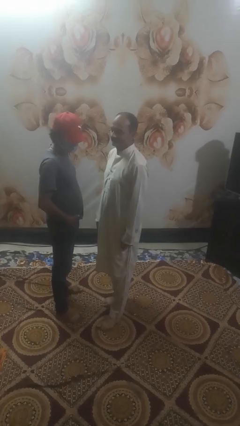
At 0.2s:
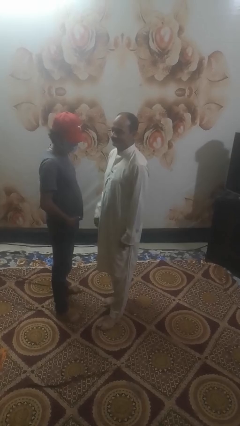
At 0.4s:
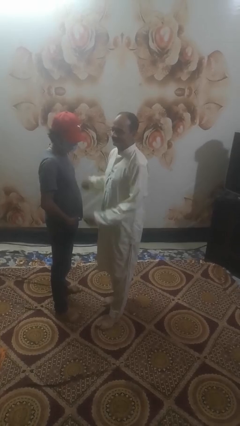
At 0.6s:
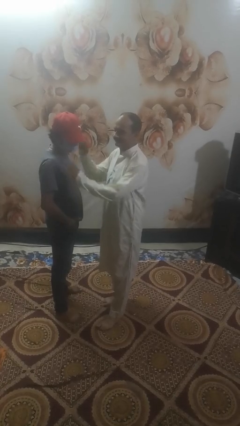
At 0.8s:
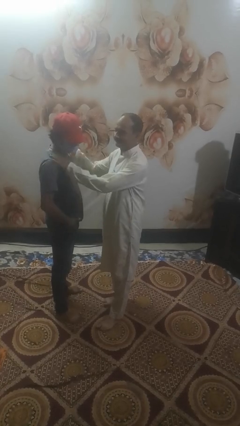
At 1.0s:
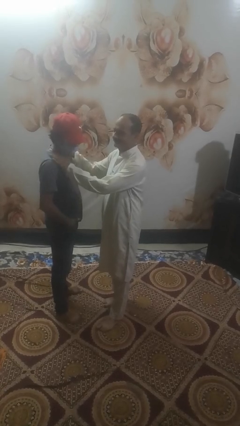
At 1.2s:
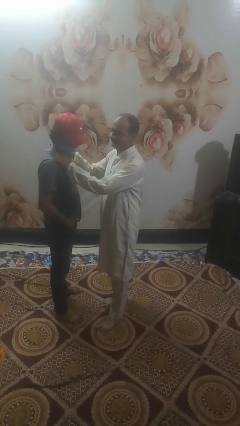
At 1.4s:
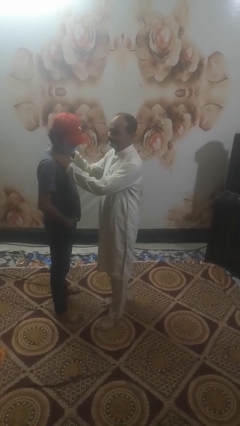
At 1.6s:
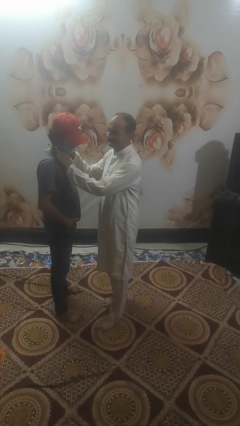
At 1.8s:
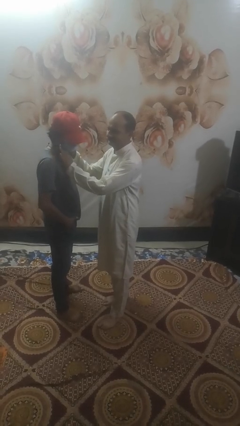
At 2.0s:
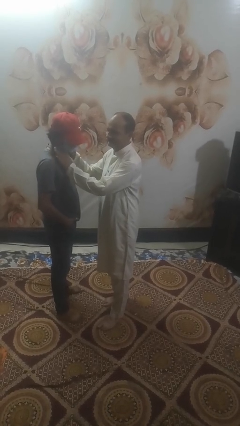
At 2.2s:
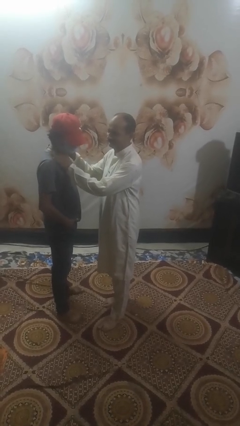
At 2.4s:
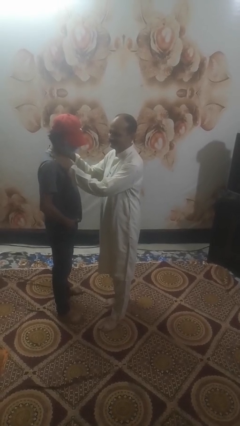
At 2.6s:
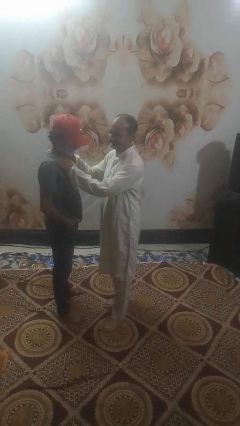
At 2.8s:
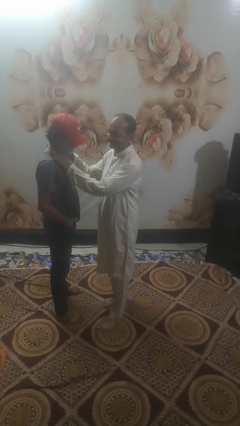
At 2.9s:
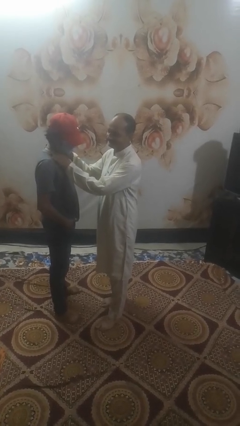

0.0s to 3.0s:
person pounds shoulders of person

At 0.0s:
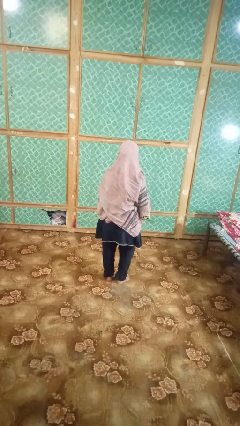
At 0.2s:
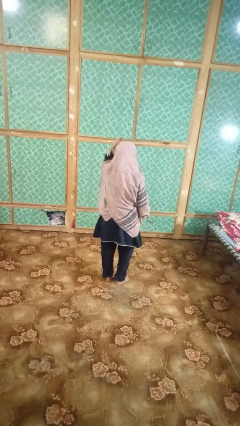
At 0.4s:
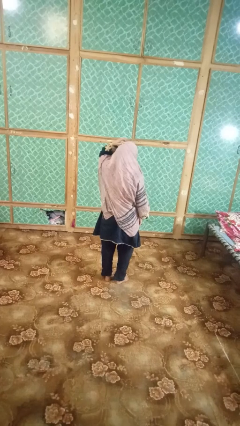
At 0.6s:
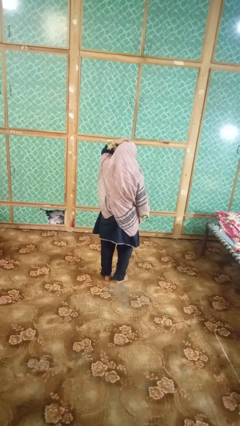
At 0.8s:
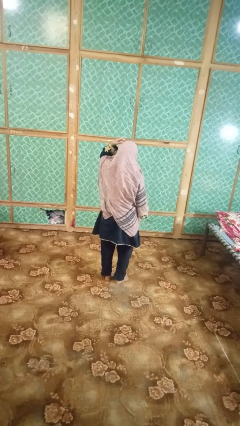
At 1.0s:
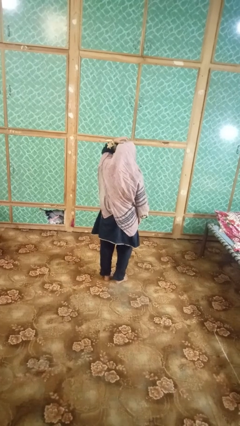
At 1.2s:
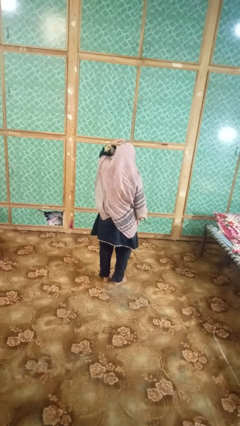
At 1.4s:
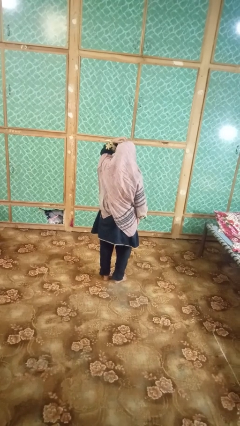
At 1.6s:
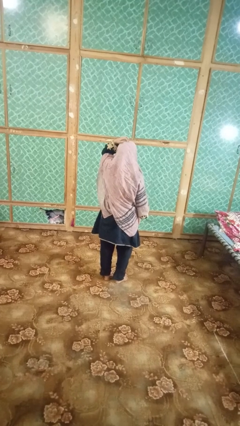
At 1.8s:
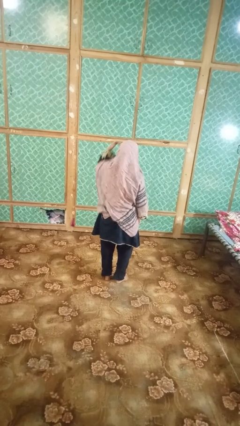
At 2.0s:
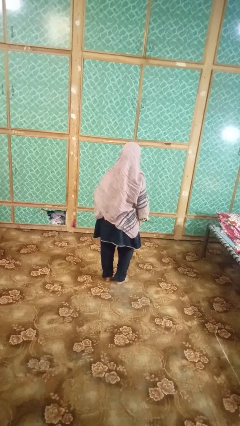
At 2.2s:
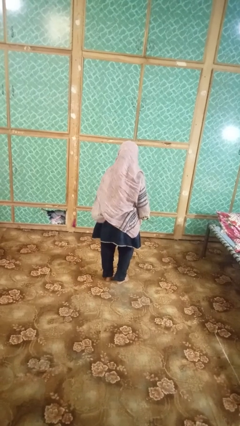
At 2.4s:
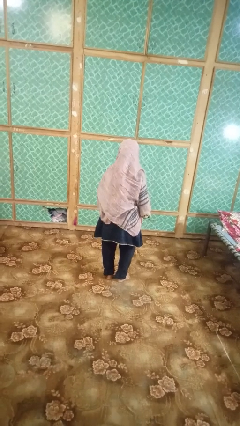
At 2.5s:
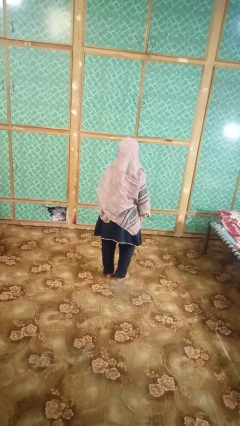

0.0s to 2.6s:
person strokes hair

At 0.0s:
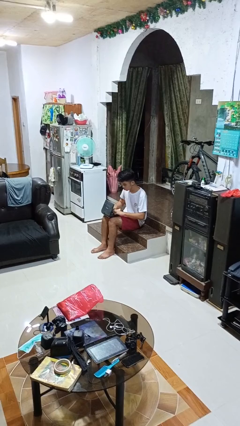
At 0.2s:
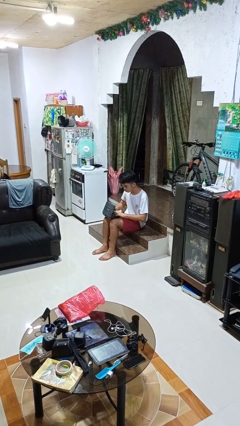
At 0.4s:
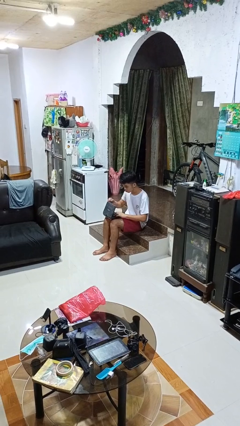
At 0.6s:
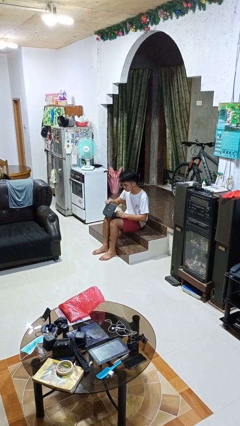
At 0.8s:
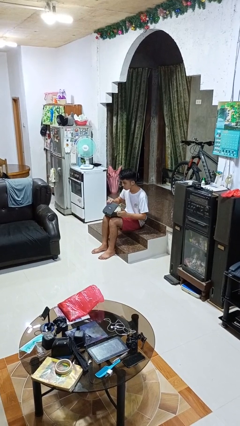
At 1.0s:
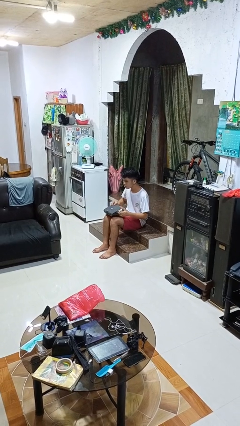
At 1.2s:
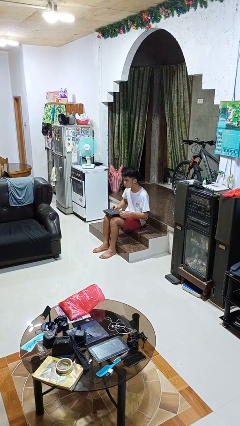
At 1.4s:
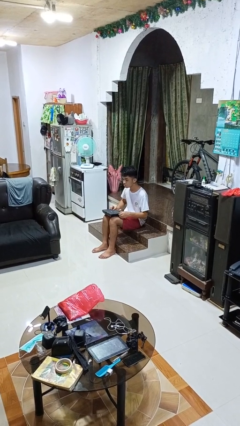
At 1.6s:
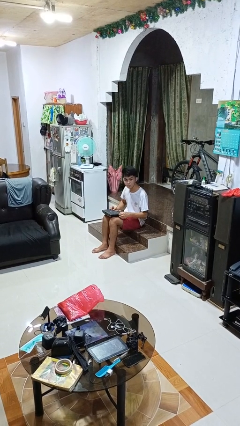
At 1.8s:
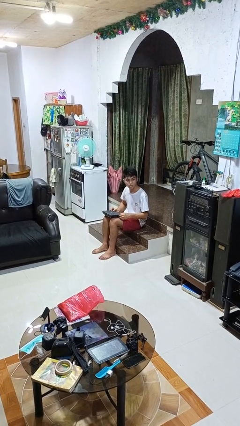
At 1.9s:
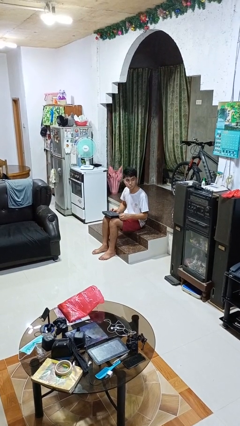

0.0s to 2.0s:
person closes laptop

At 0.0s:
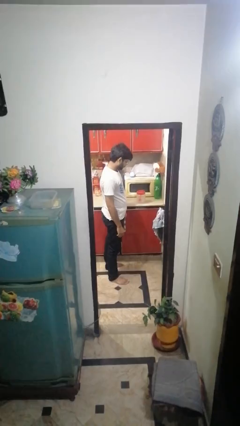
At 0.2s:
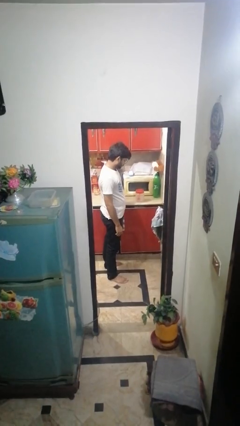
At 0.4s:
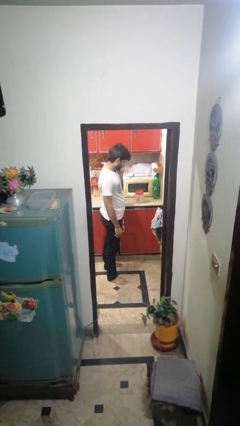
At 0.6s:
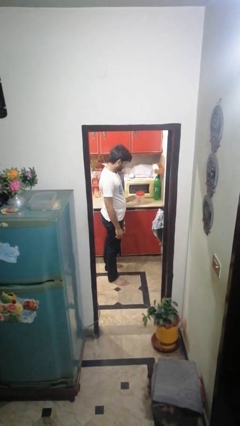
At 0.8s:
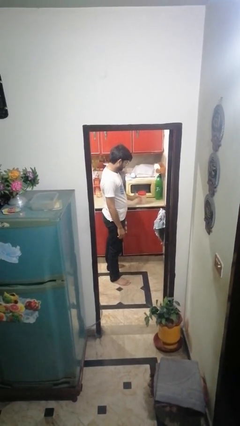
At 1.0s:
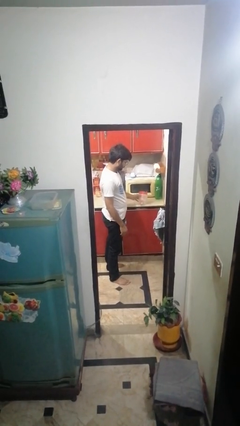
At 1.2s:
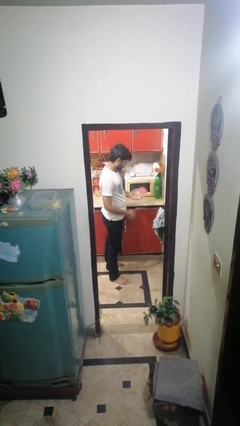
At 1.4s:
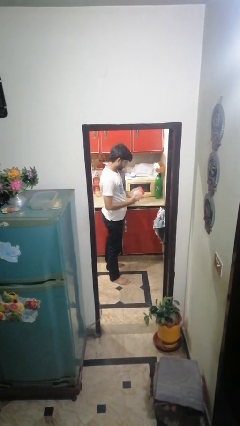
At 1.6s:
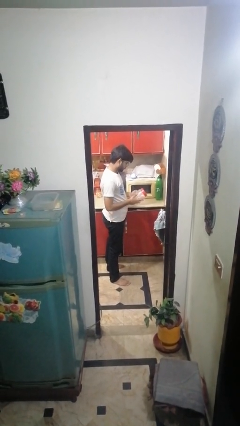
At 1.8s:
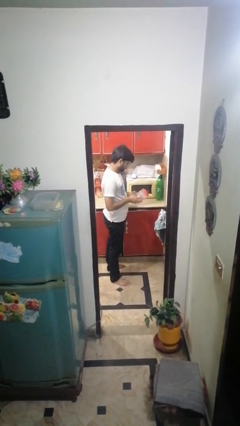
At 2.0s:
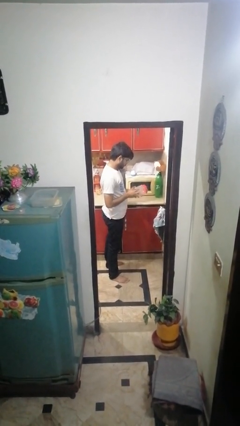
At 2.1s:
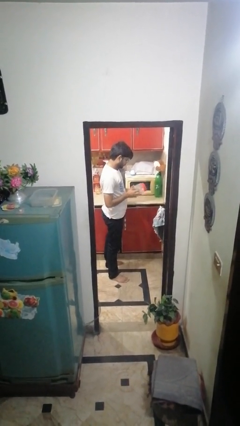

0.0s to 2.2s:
person picks up object from countertop

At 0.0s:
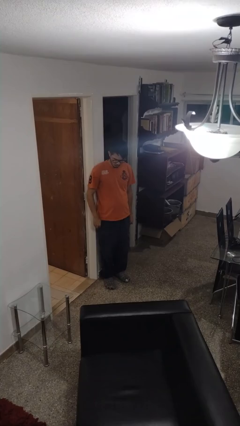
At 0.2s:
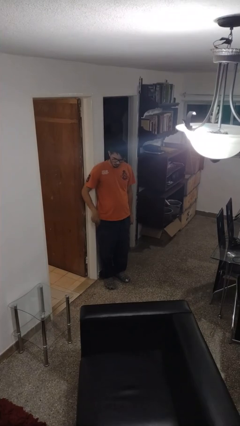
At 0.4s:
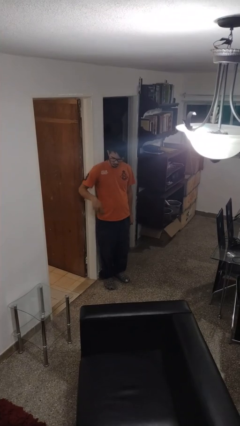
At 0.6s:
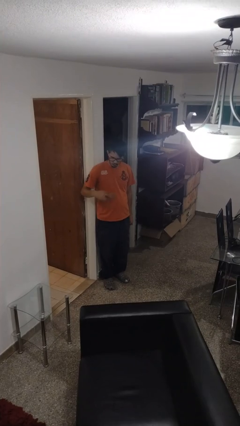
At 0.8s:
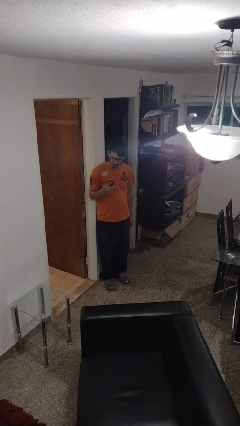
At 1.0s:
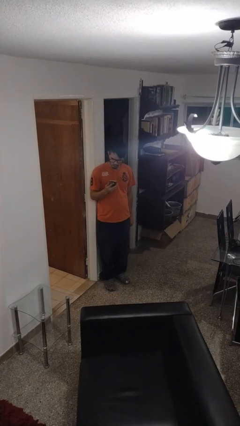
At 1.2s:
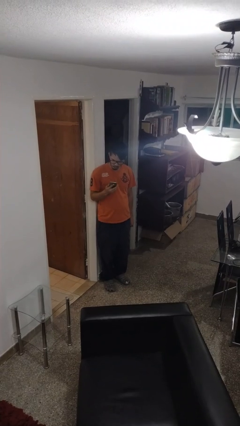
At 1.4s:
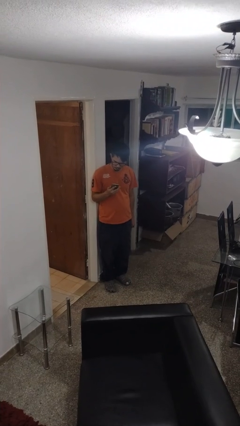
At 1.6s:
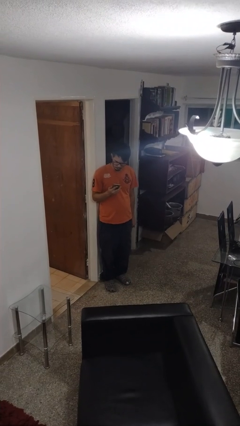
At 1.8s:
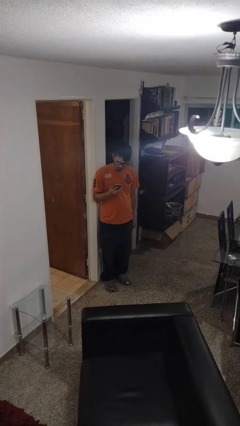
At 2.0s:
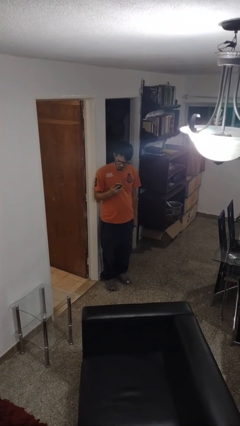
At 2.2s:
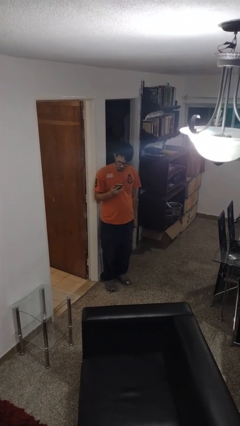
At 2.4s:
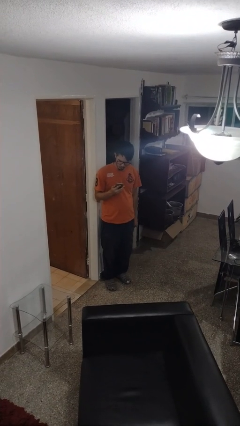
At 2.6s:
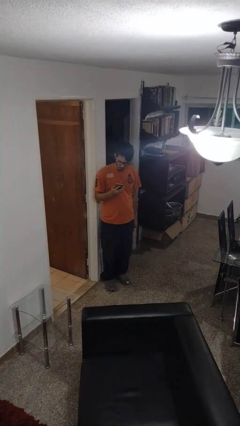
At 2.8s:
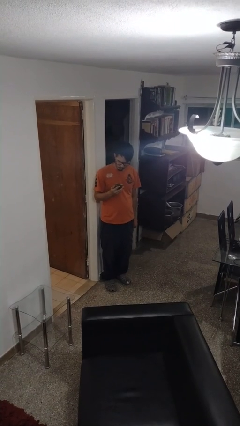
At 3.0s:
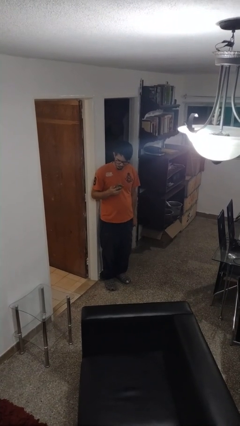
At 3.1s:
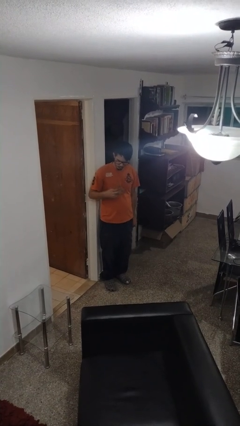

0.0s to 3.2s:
person takes phone from pocket

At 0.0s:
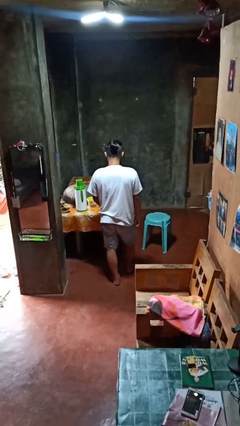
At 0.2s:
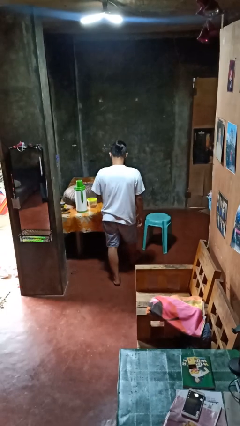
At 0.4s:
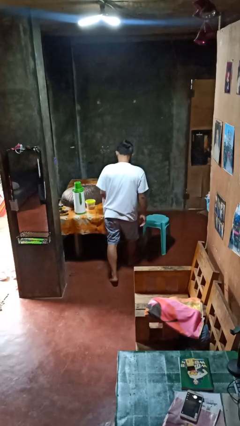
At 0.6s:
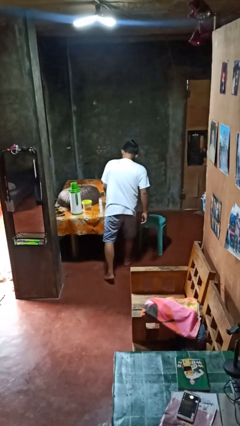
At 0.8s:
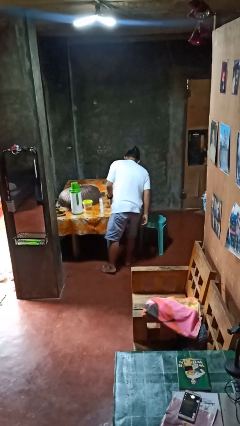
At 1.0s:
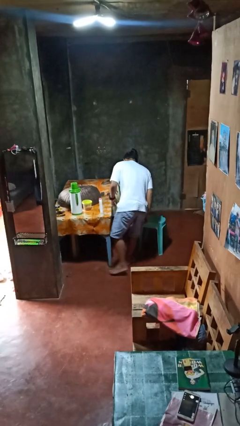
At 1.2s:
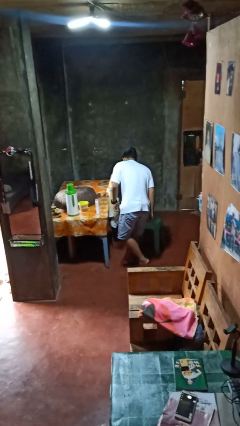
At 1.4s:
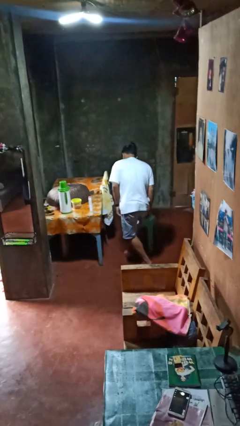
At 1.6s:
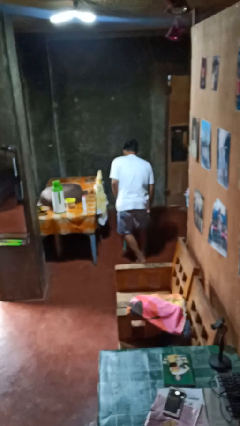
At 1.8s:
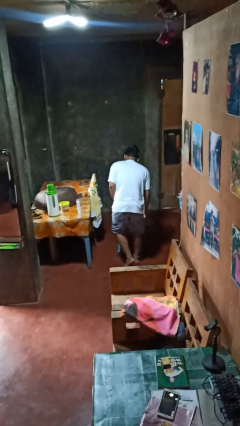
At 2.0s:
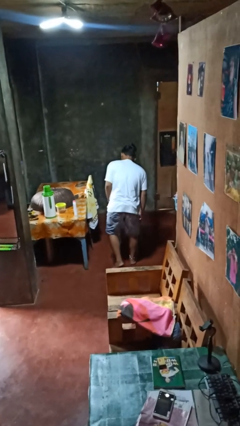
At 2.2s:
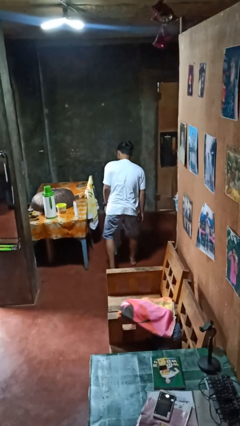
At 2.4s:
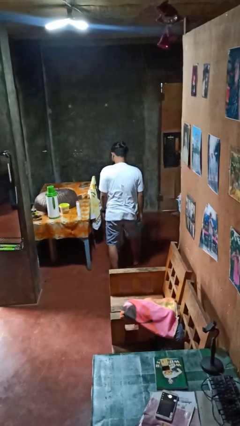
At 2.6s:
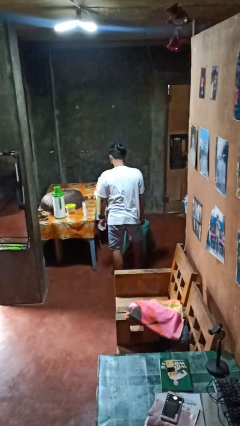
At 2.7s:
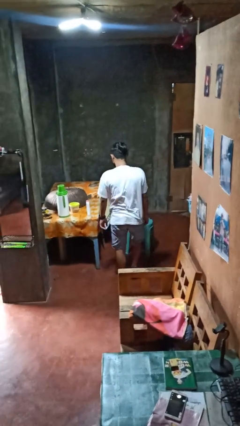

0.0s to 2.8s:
person bumps into table

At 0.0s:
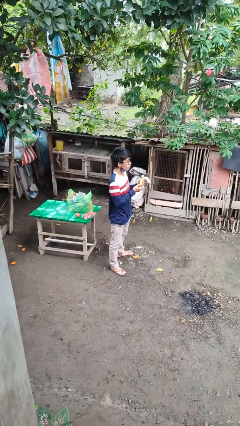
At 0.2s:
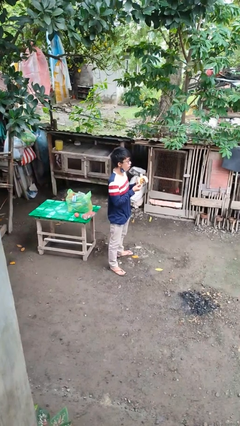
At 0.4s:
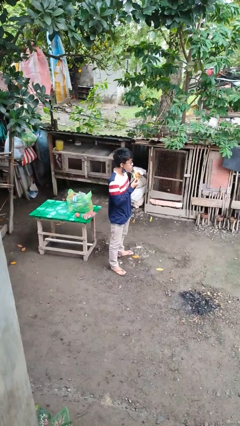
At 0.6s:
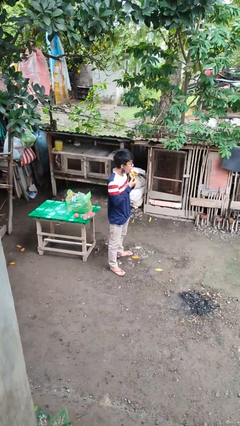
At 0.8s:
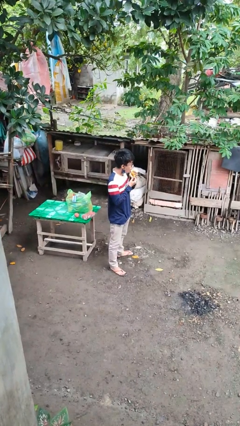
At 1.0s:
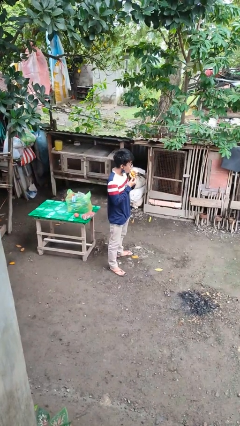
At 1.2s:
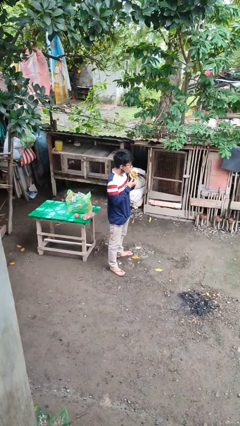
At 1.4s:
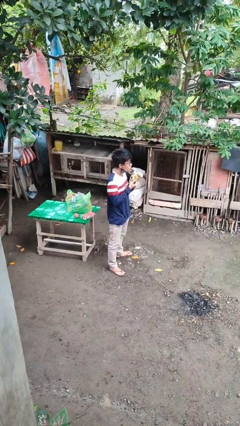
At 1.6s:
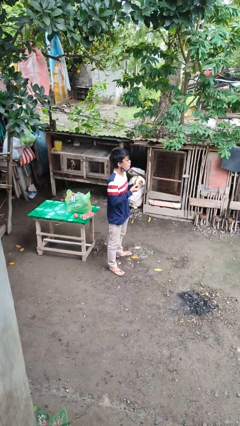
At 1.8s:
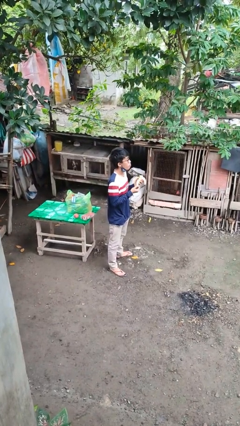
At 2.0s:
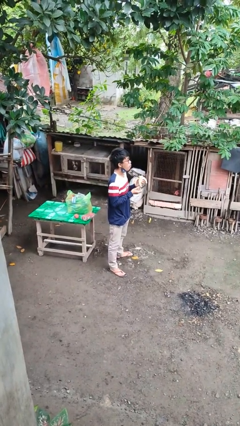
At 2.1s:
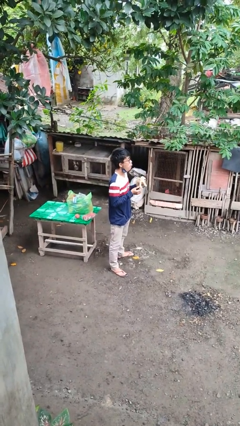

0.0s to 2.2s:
person eats banana
